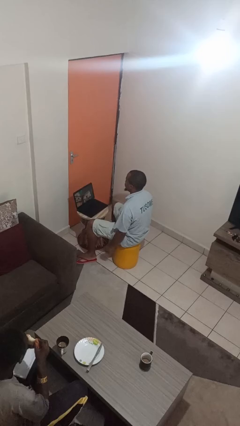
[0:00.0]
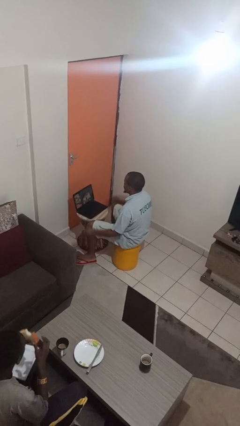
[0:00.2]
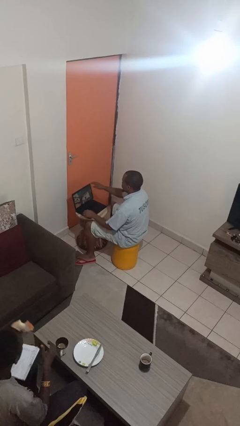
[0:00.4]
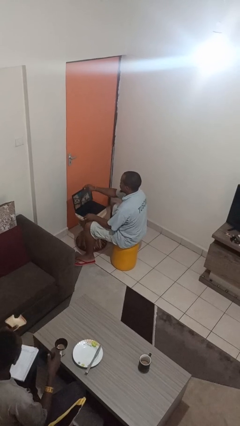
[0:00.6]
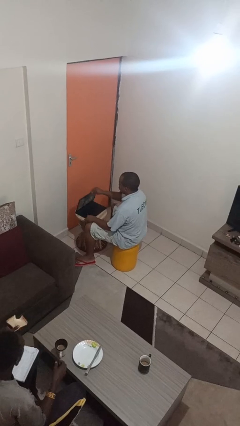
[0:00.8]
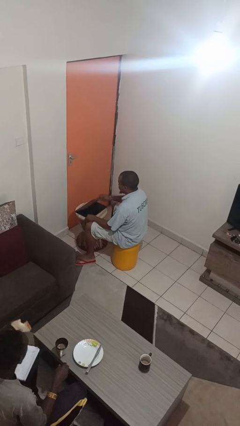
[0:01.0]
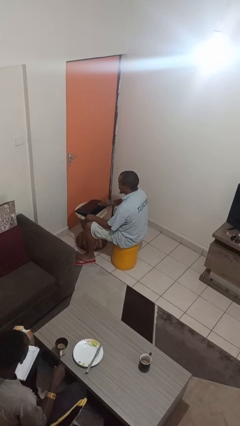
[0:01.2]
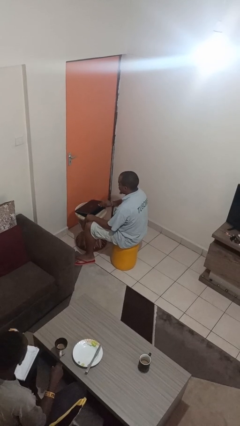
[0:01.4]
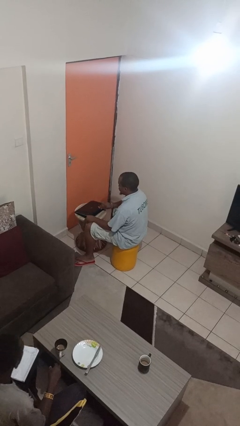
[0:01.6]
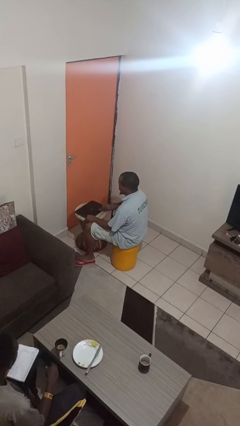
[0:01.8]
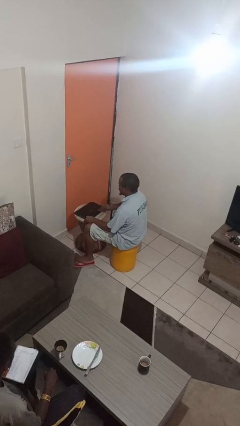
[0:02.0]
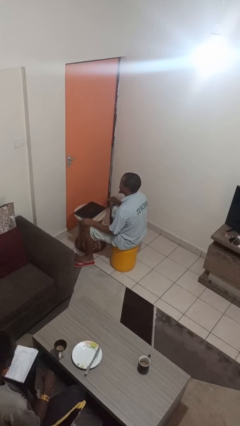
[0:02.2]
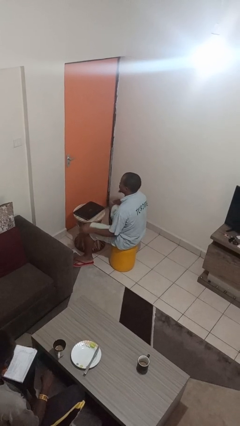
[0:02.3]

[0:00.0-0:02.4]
person closes laptop

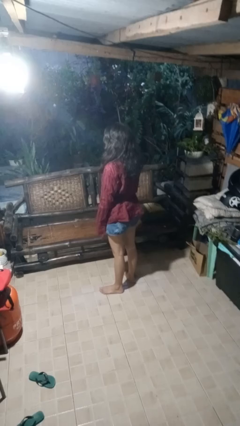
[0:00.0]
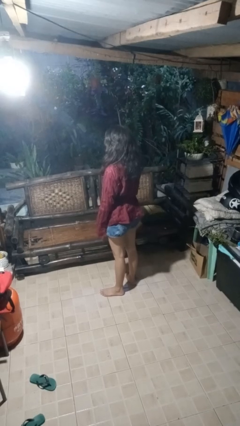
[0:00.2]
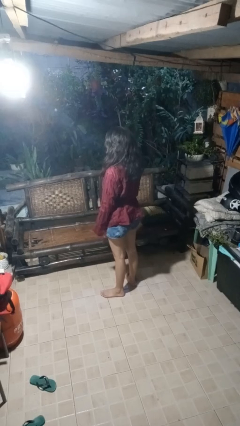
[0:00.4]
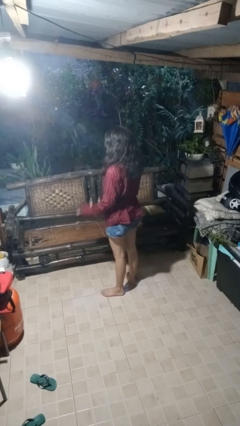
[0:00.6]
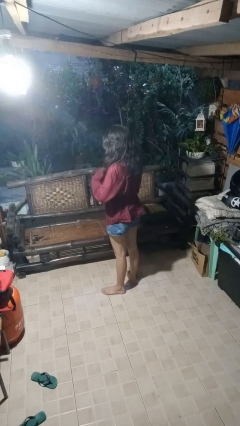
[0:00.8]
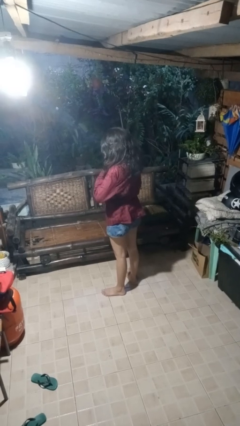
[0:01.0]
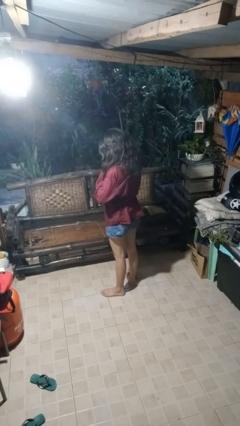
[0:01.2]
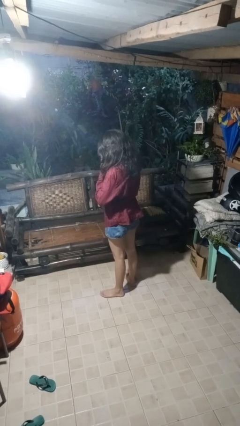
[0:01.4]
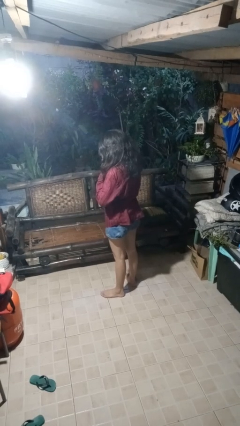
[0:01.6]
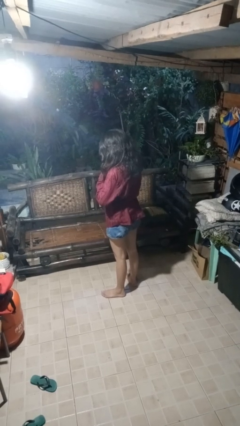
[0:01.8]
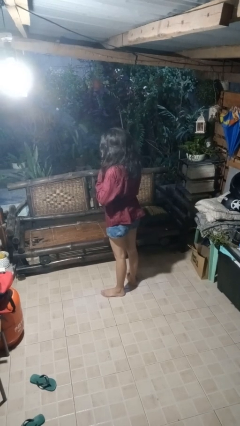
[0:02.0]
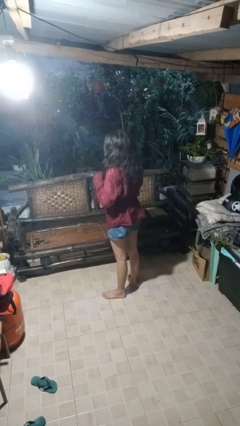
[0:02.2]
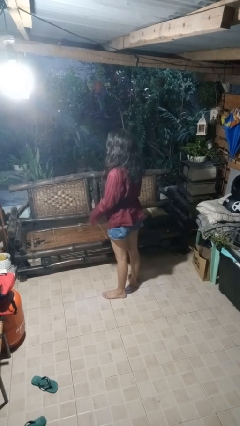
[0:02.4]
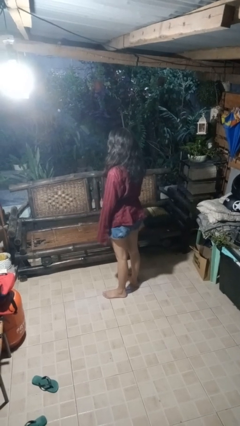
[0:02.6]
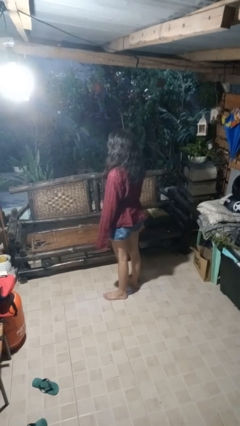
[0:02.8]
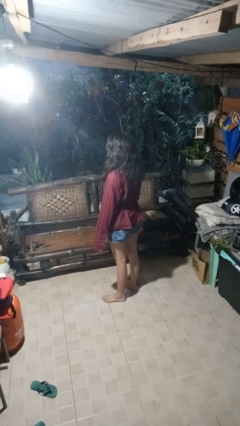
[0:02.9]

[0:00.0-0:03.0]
person buttons shirt

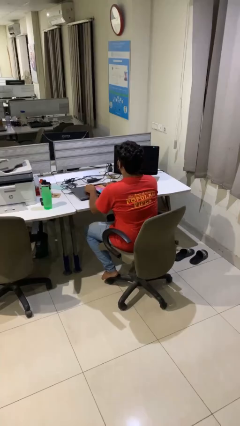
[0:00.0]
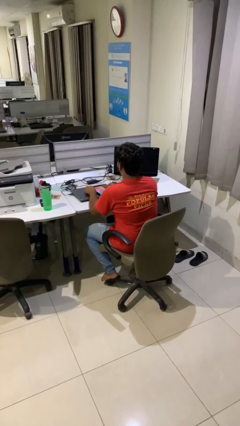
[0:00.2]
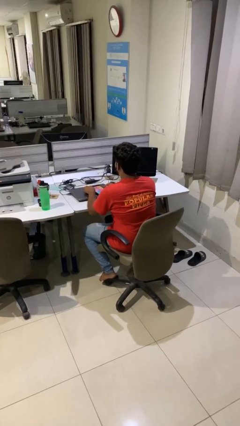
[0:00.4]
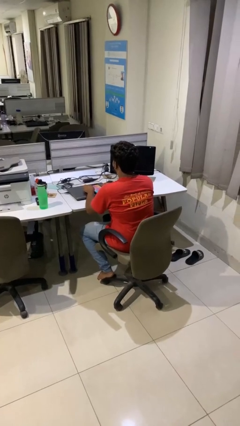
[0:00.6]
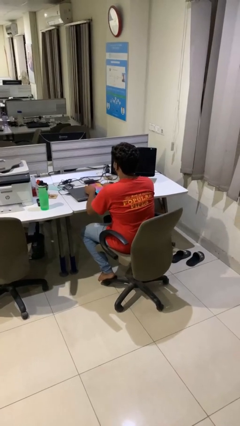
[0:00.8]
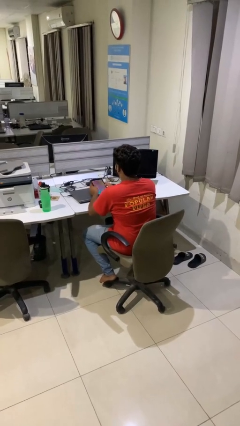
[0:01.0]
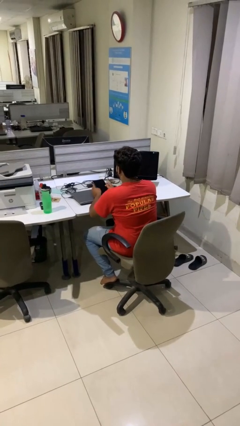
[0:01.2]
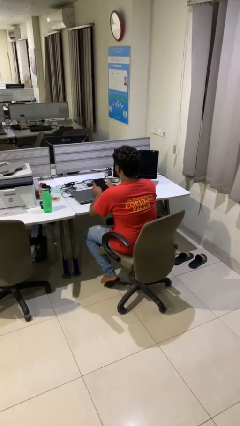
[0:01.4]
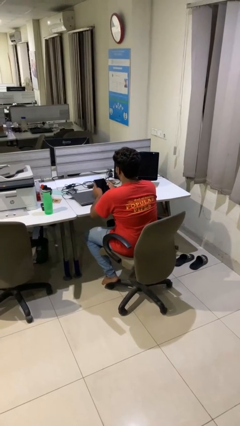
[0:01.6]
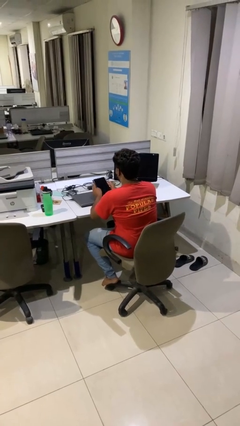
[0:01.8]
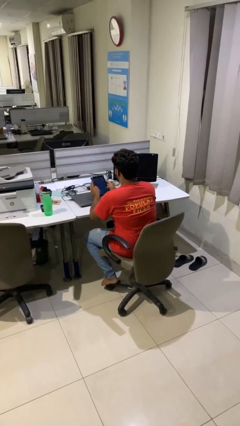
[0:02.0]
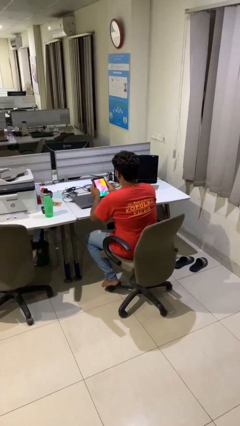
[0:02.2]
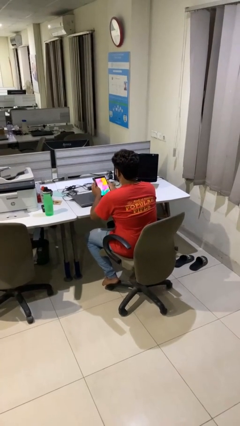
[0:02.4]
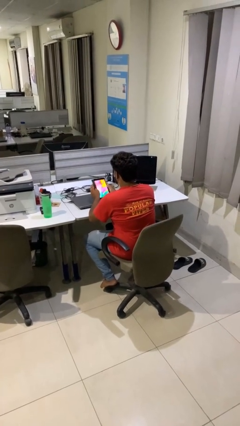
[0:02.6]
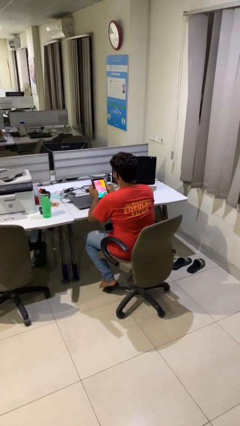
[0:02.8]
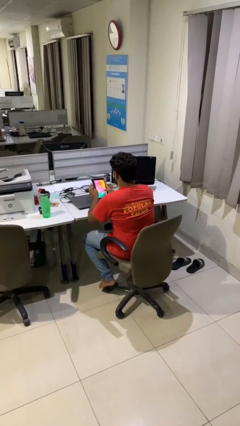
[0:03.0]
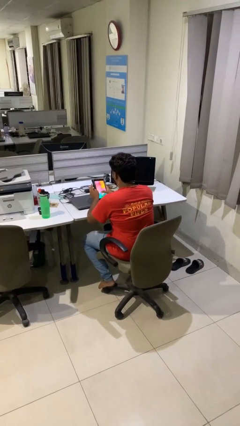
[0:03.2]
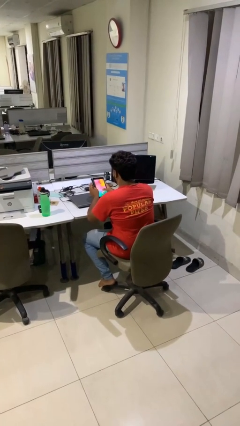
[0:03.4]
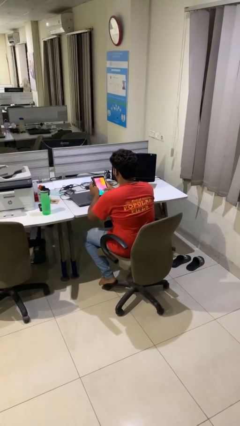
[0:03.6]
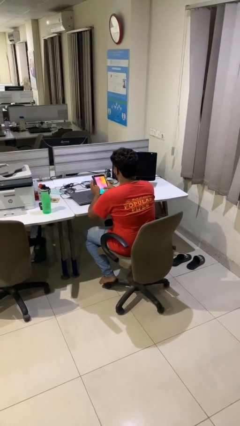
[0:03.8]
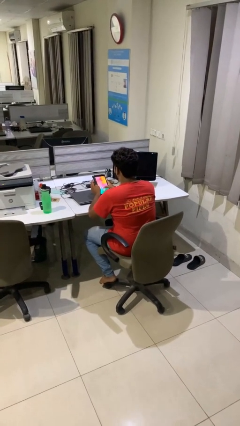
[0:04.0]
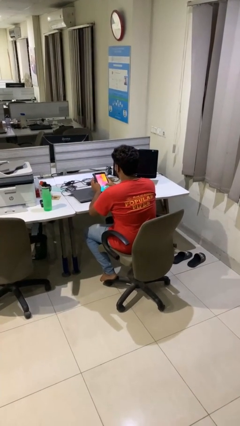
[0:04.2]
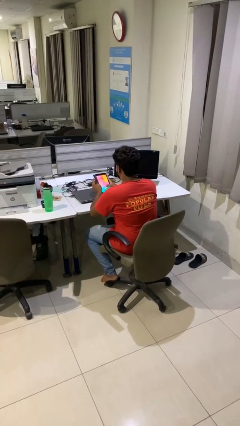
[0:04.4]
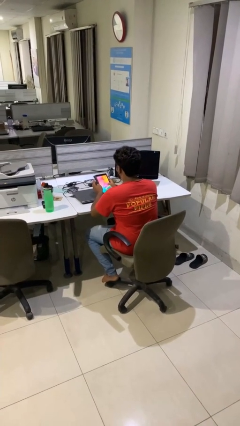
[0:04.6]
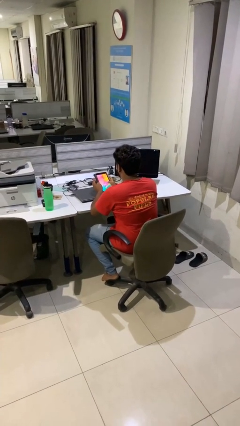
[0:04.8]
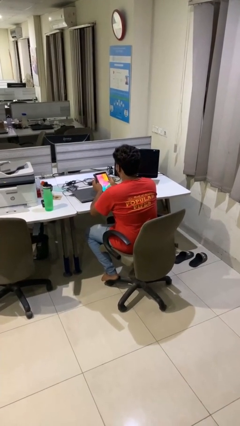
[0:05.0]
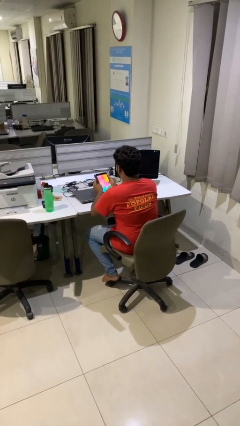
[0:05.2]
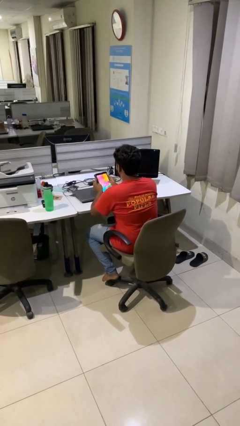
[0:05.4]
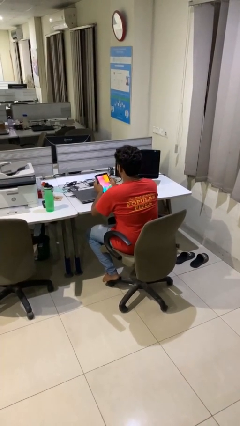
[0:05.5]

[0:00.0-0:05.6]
person interacts with tablet

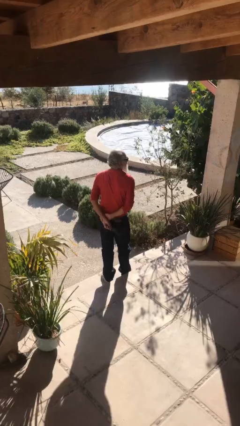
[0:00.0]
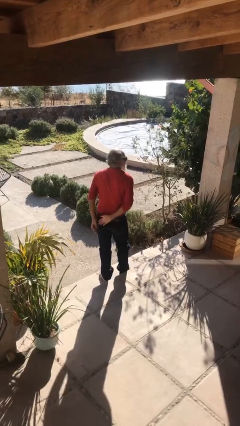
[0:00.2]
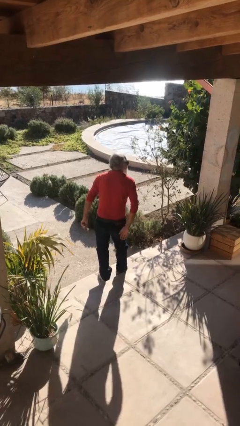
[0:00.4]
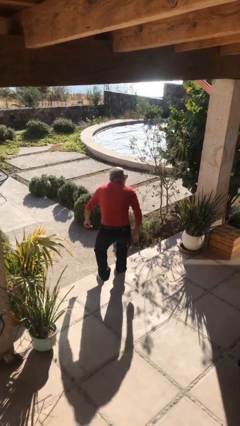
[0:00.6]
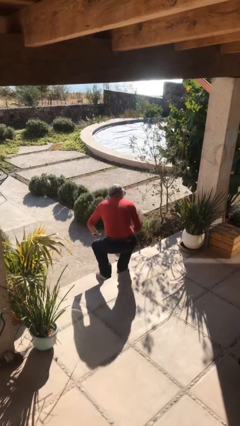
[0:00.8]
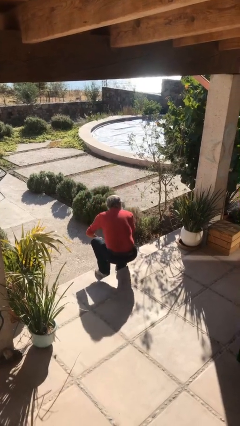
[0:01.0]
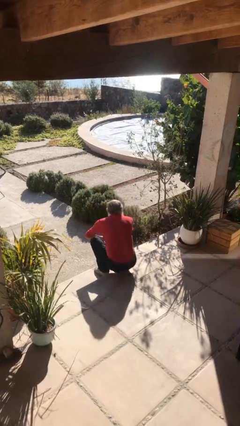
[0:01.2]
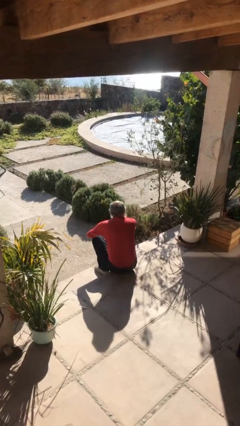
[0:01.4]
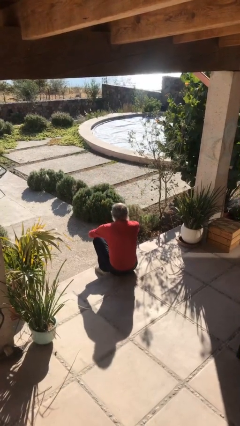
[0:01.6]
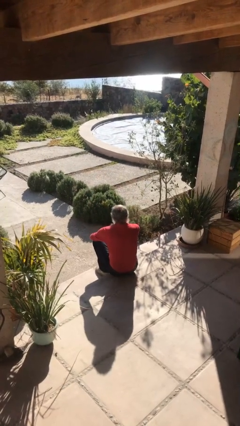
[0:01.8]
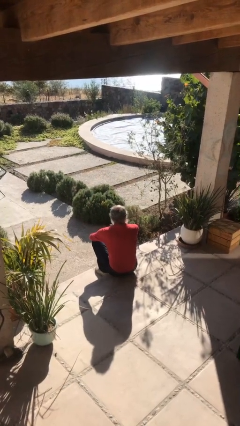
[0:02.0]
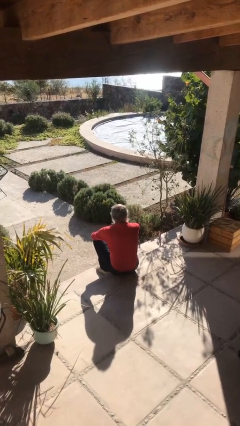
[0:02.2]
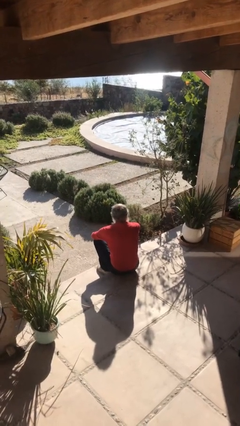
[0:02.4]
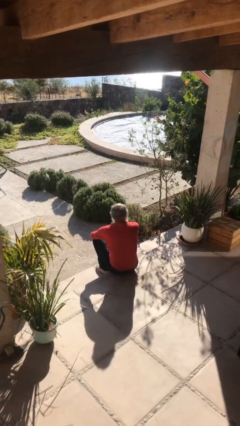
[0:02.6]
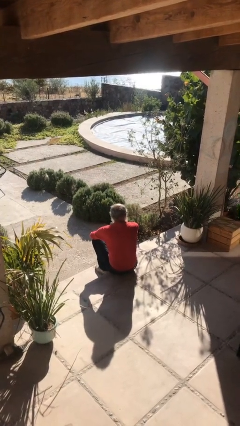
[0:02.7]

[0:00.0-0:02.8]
person sits down

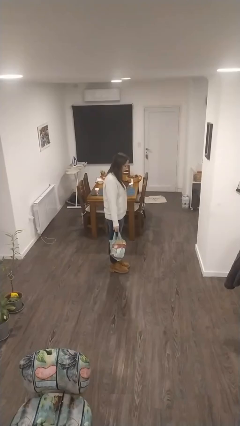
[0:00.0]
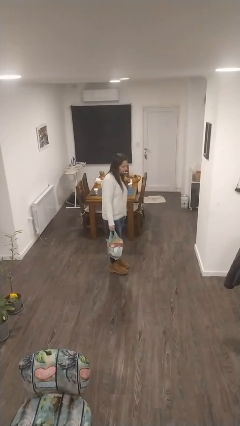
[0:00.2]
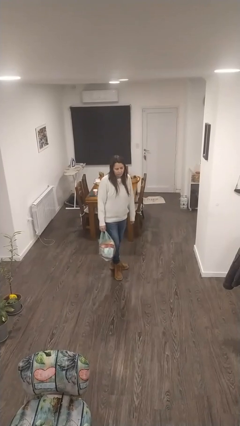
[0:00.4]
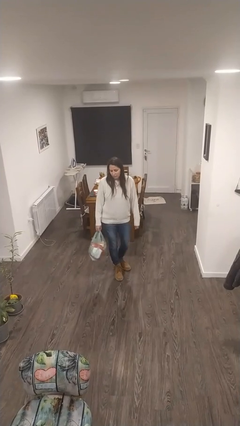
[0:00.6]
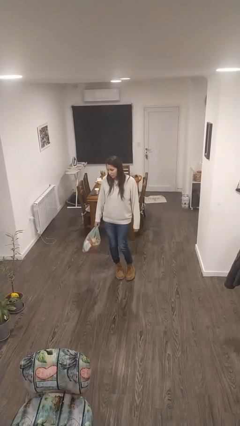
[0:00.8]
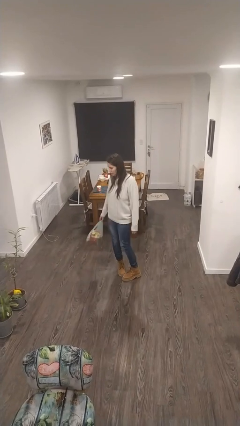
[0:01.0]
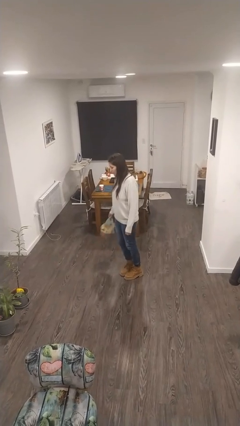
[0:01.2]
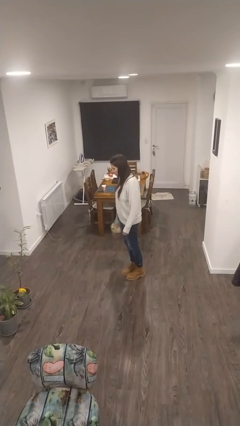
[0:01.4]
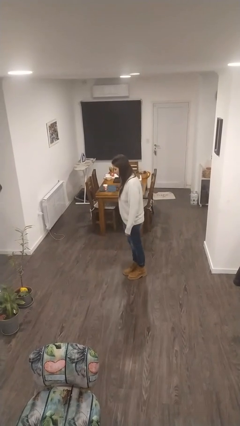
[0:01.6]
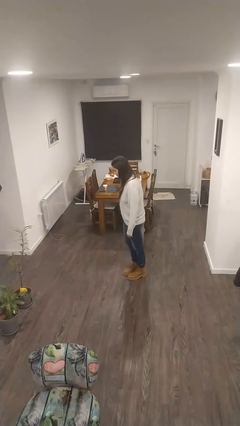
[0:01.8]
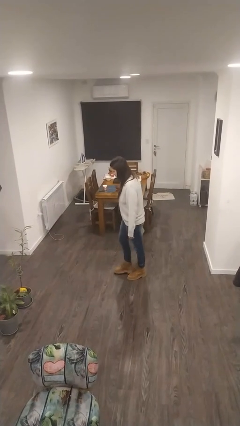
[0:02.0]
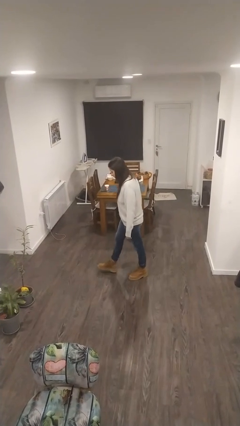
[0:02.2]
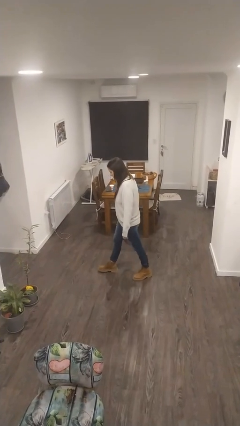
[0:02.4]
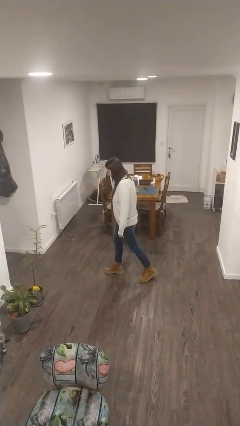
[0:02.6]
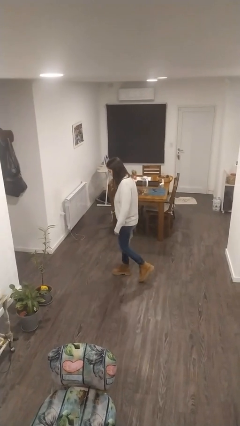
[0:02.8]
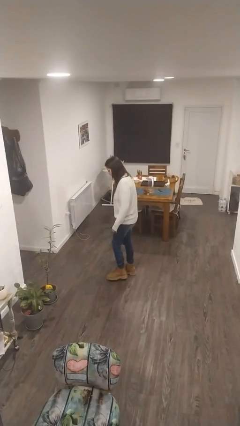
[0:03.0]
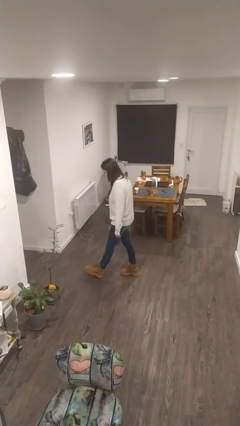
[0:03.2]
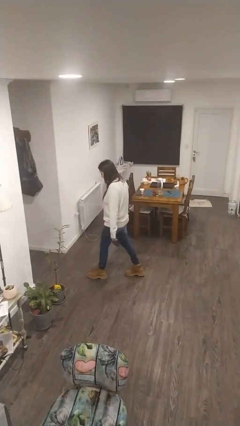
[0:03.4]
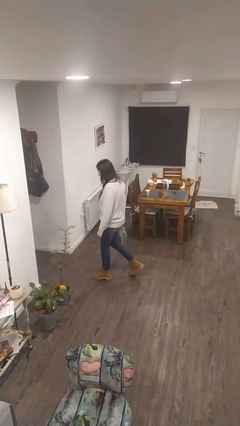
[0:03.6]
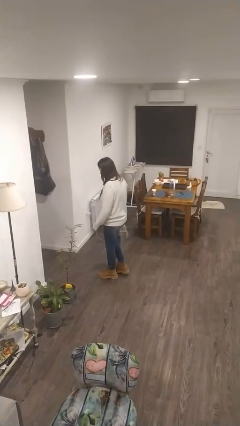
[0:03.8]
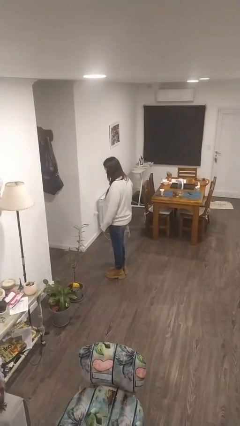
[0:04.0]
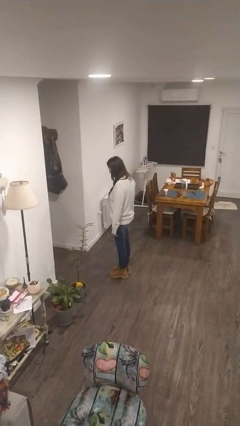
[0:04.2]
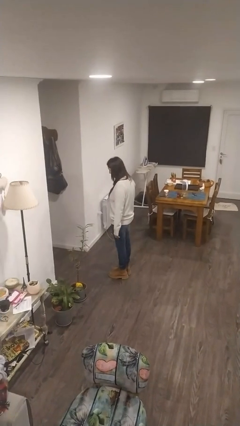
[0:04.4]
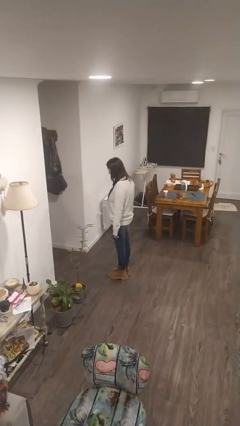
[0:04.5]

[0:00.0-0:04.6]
person carries groceries
